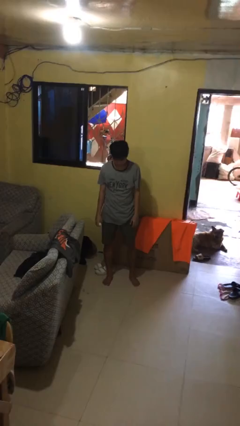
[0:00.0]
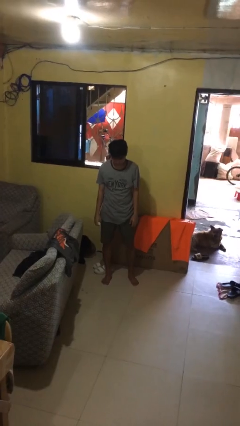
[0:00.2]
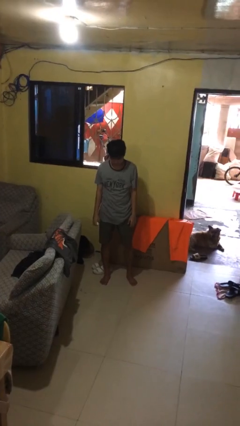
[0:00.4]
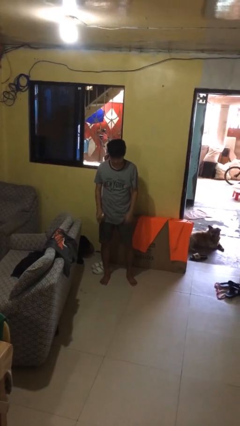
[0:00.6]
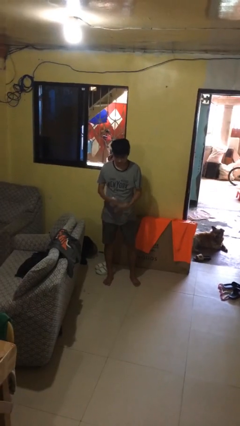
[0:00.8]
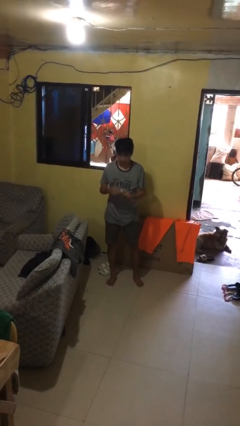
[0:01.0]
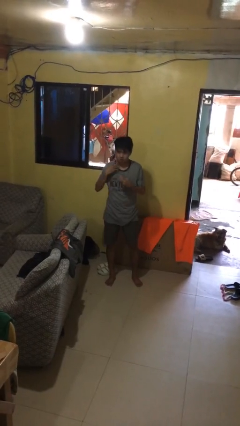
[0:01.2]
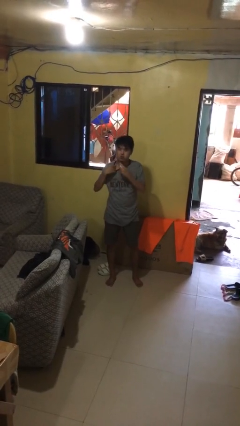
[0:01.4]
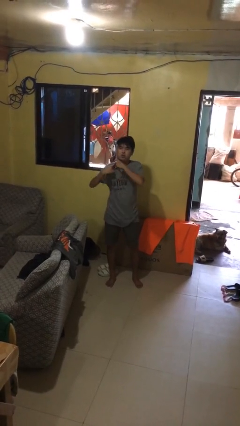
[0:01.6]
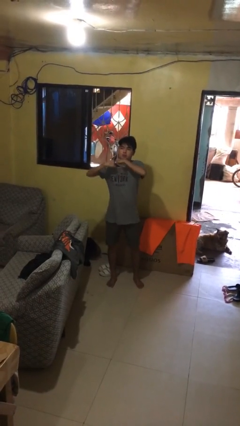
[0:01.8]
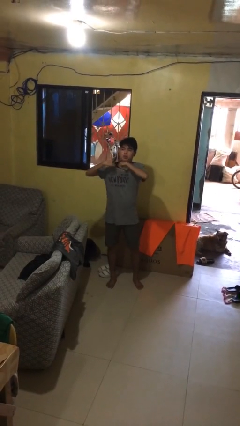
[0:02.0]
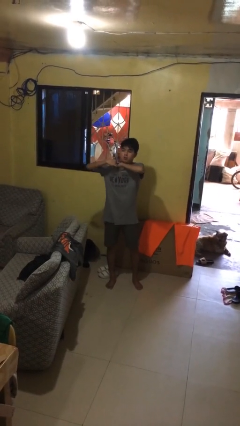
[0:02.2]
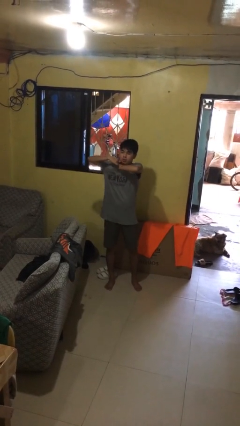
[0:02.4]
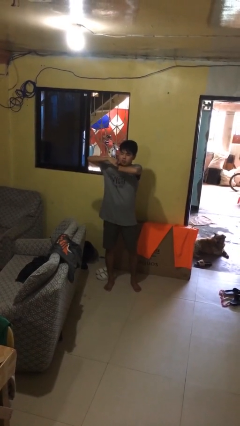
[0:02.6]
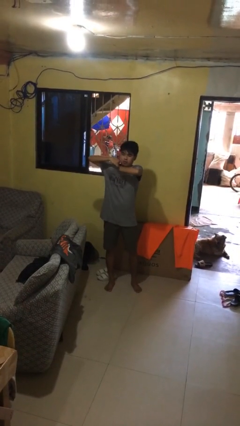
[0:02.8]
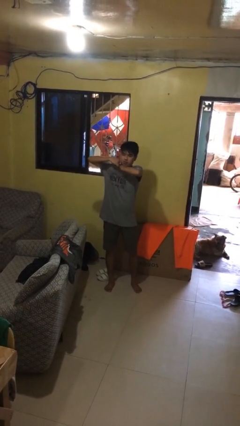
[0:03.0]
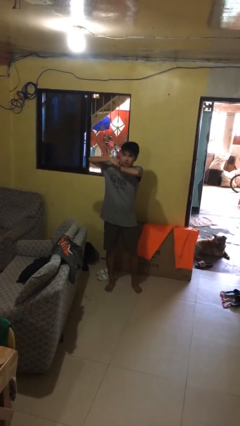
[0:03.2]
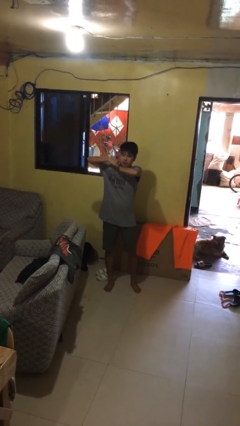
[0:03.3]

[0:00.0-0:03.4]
person applies deodorant

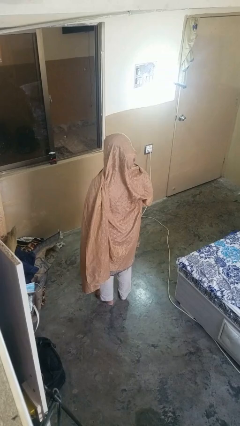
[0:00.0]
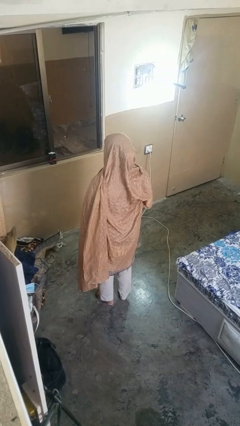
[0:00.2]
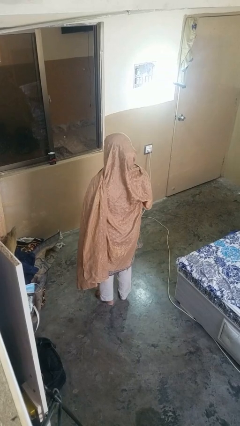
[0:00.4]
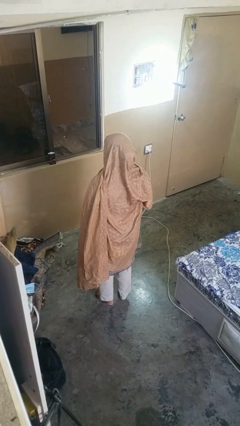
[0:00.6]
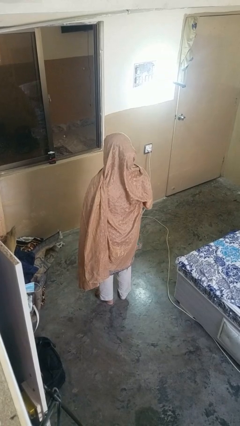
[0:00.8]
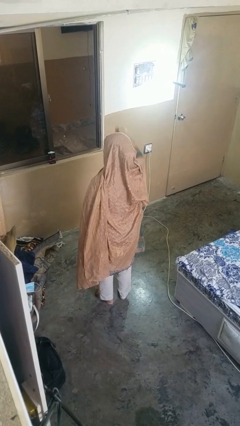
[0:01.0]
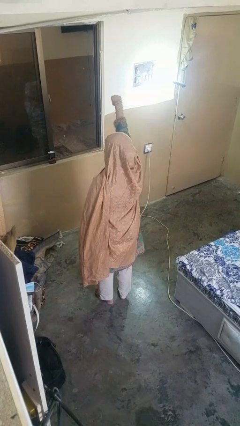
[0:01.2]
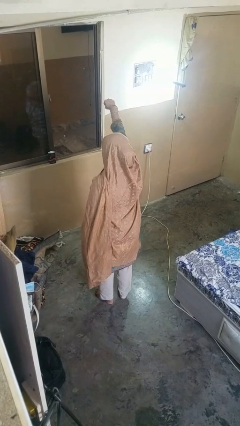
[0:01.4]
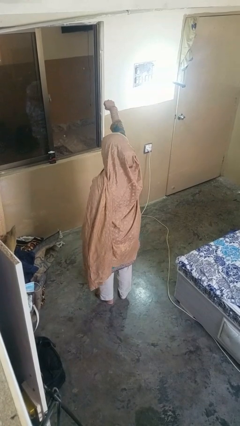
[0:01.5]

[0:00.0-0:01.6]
person punches

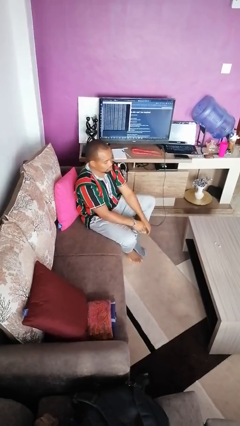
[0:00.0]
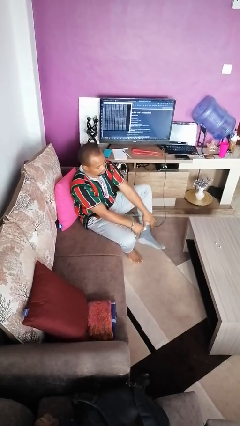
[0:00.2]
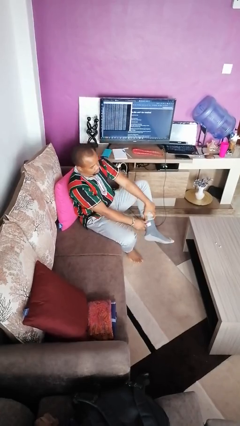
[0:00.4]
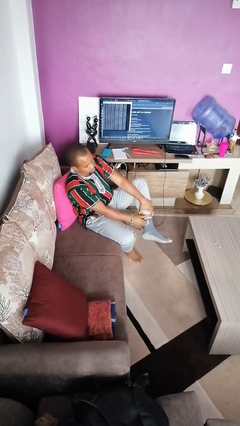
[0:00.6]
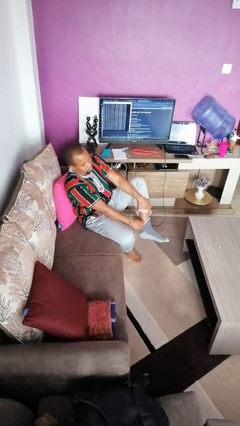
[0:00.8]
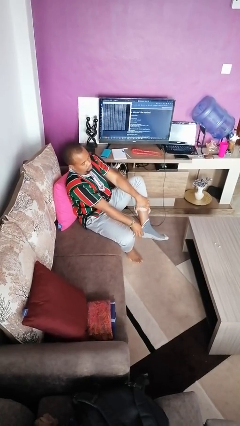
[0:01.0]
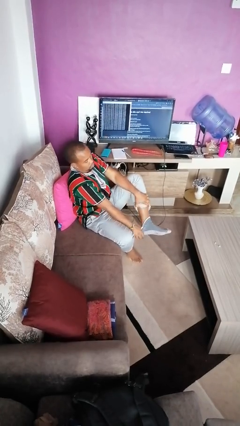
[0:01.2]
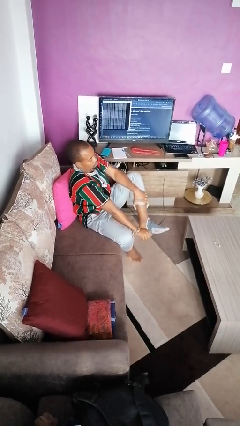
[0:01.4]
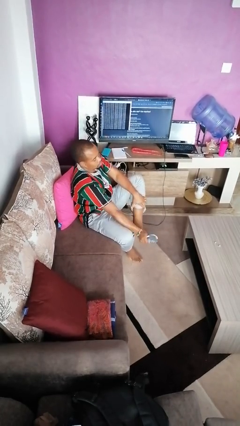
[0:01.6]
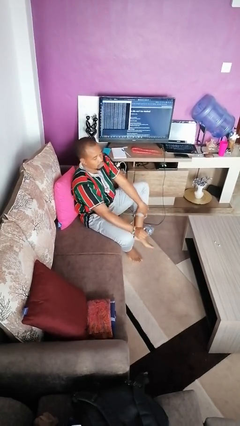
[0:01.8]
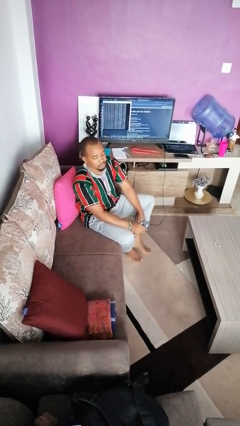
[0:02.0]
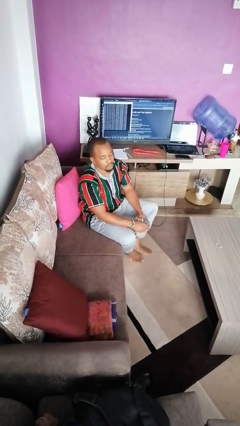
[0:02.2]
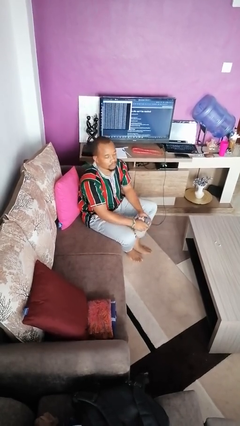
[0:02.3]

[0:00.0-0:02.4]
person takes off socks

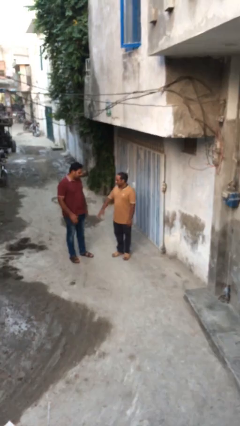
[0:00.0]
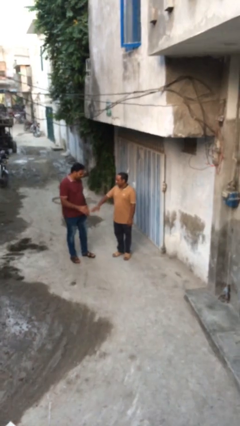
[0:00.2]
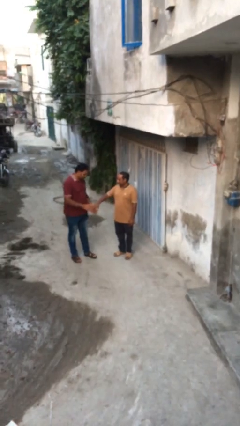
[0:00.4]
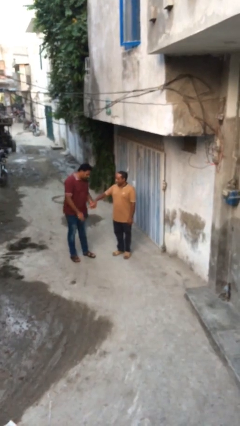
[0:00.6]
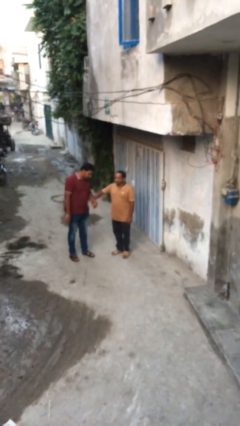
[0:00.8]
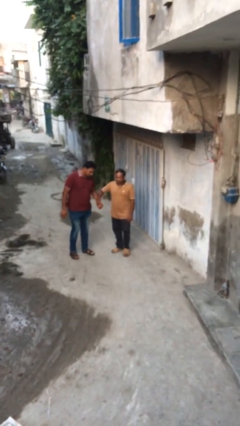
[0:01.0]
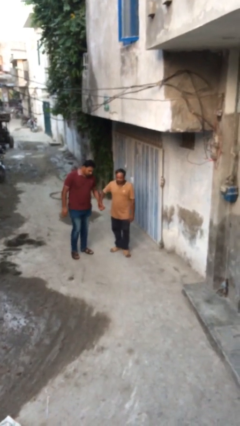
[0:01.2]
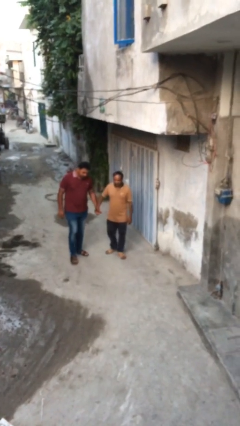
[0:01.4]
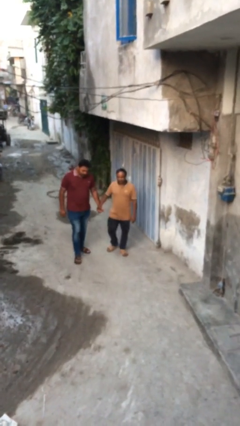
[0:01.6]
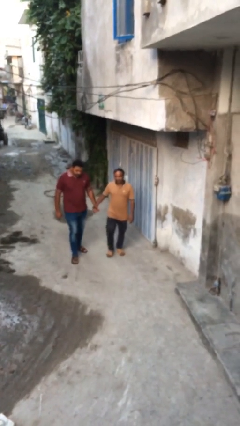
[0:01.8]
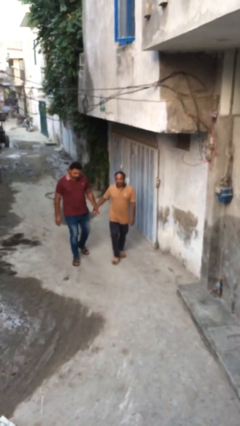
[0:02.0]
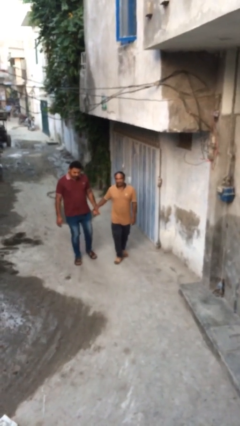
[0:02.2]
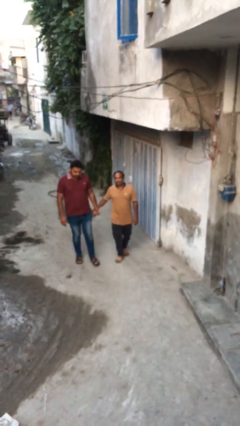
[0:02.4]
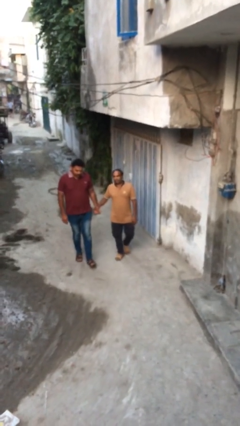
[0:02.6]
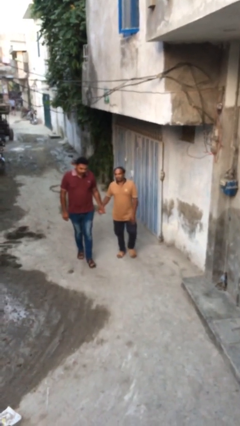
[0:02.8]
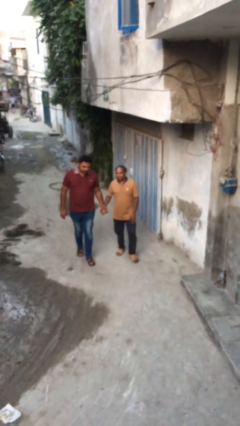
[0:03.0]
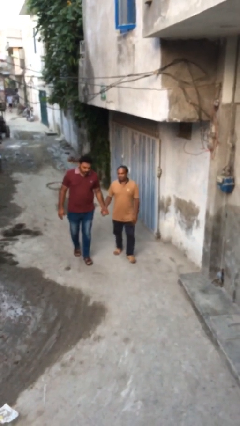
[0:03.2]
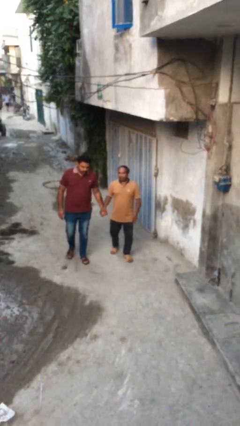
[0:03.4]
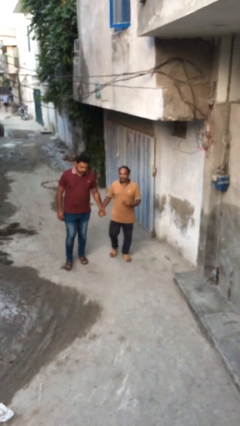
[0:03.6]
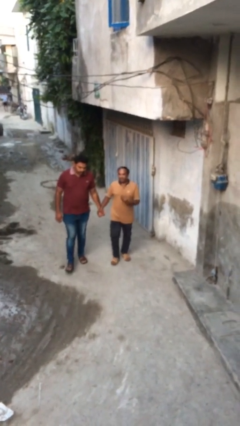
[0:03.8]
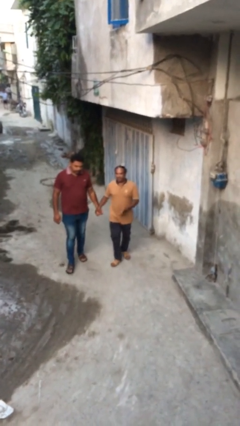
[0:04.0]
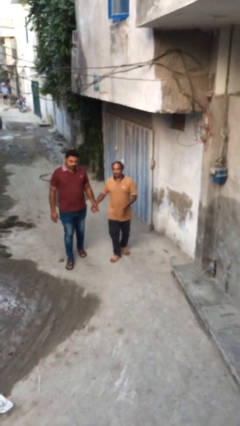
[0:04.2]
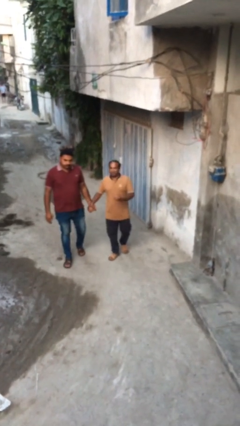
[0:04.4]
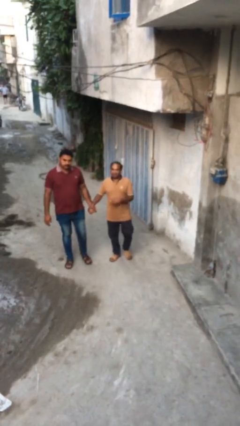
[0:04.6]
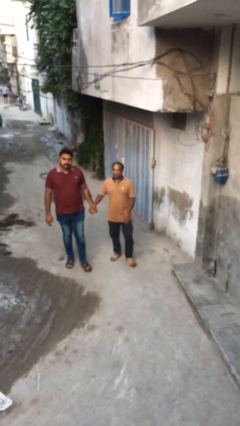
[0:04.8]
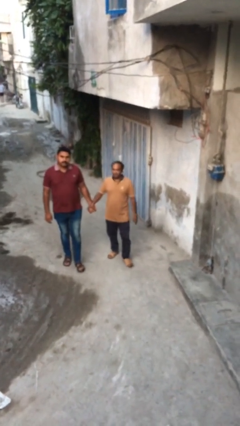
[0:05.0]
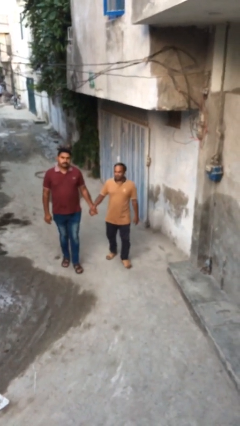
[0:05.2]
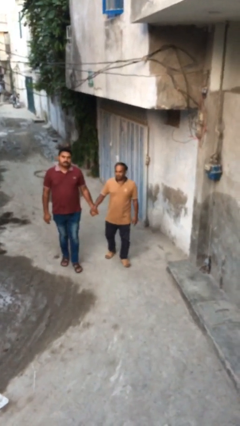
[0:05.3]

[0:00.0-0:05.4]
person holds hand

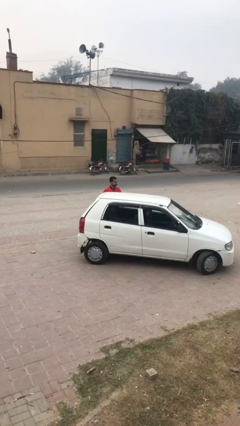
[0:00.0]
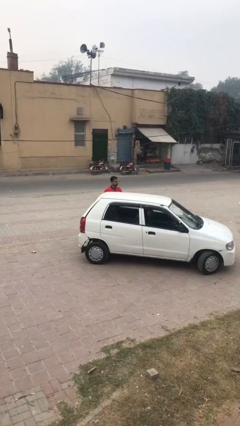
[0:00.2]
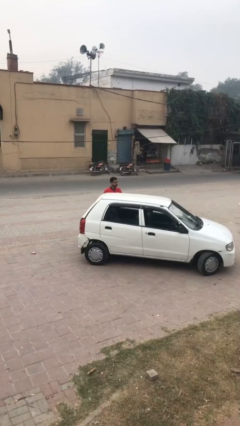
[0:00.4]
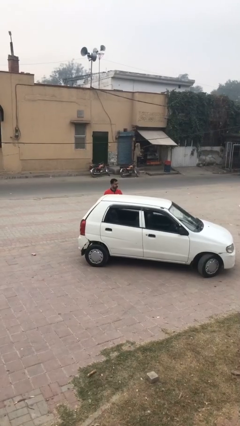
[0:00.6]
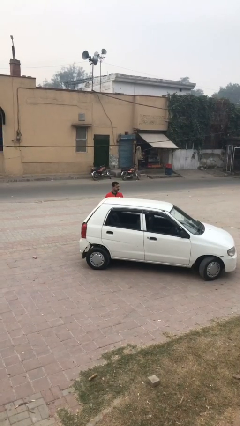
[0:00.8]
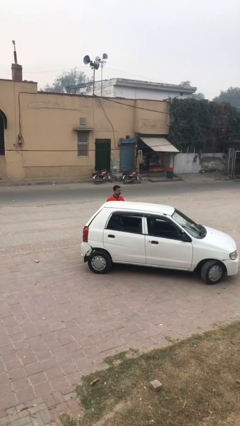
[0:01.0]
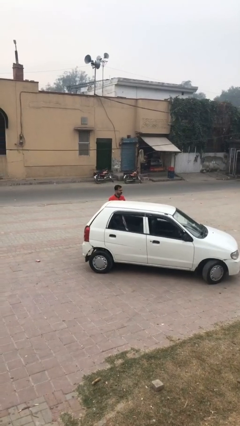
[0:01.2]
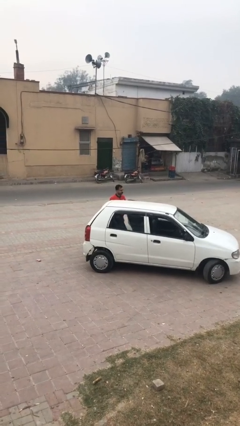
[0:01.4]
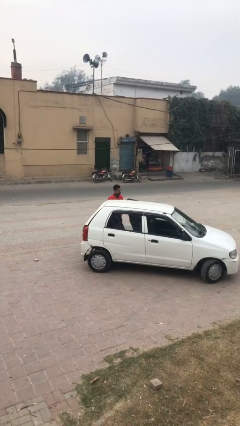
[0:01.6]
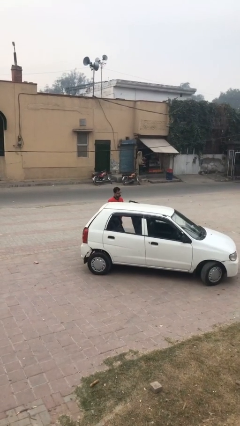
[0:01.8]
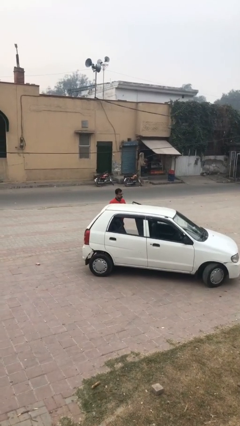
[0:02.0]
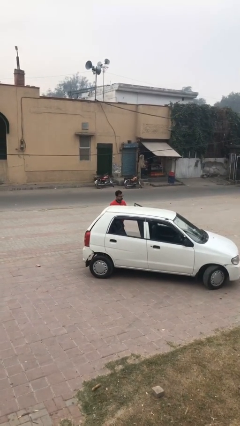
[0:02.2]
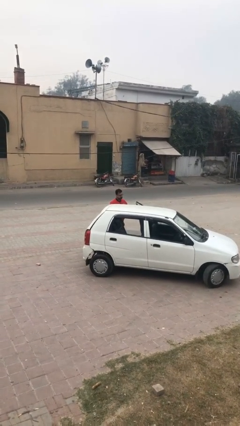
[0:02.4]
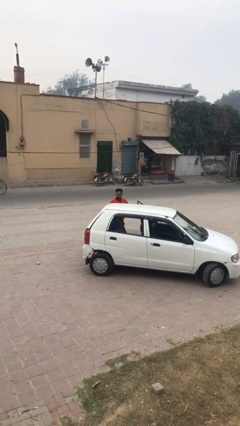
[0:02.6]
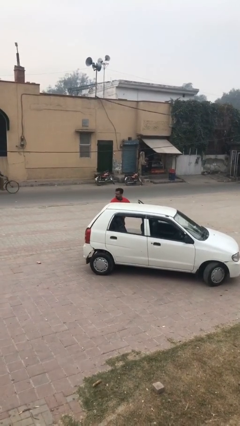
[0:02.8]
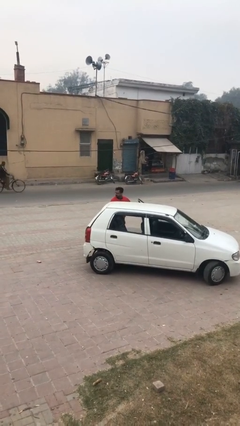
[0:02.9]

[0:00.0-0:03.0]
person opens car door

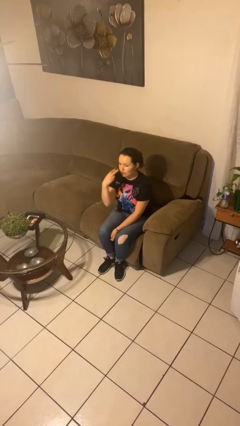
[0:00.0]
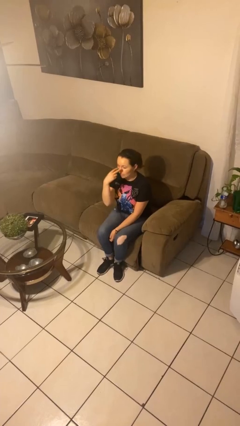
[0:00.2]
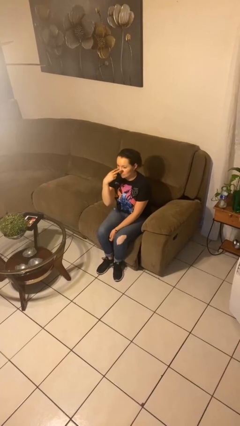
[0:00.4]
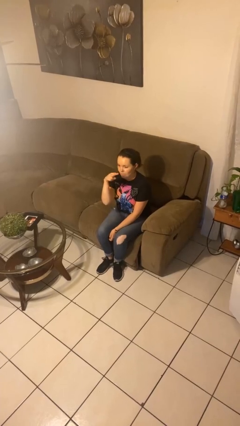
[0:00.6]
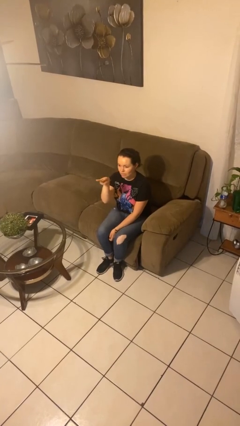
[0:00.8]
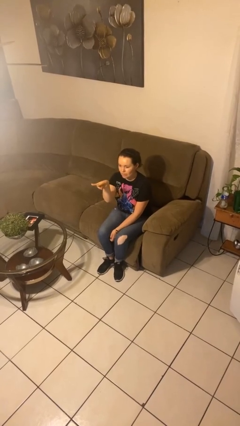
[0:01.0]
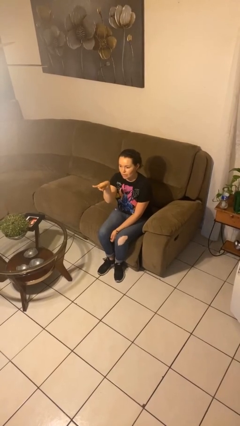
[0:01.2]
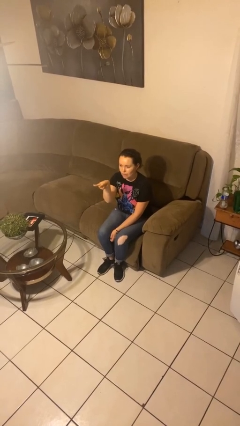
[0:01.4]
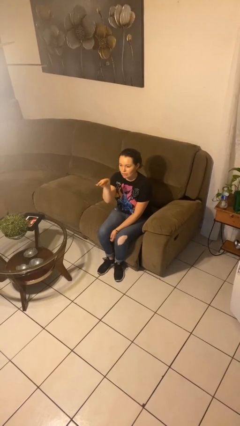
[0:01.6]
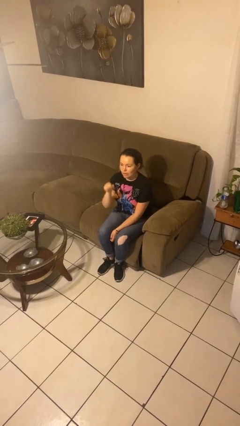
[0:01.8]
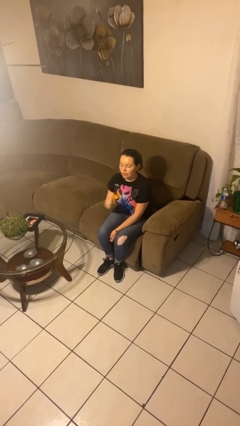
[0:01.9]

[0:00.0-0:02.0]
person gestures watch closely
